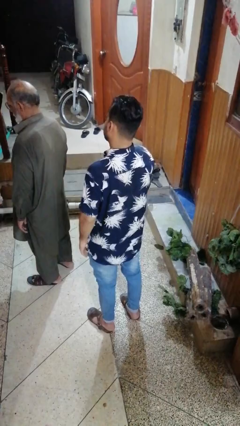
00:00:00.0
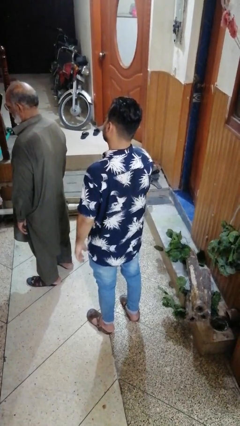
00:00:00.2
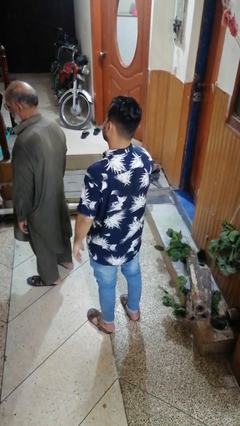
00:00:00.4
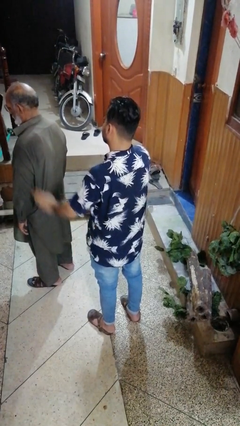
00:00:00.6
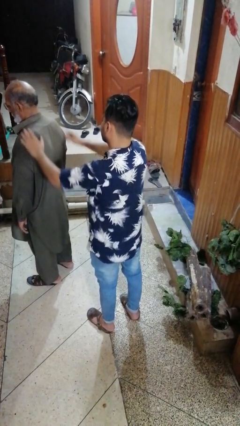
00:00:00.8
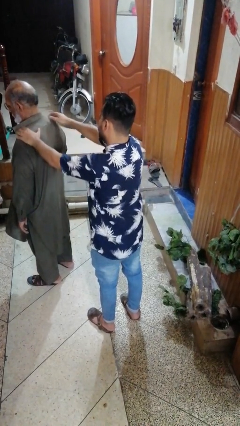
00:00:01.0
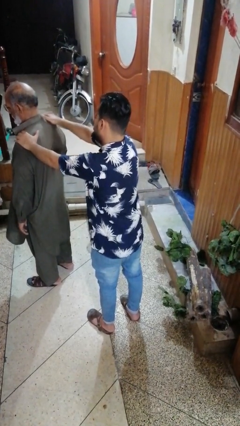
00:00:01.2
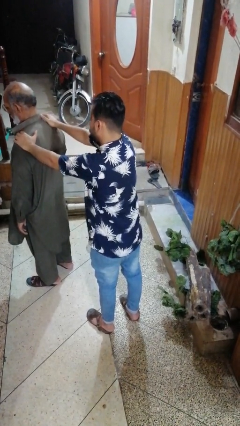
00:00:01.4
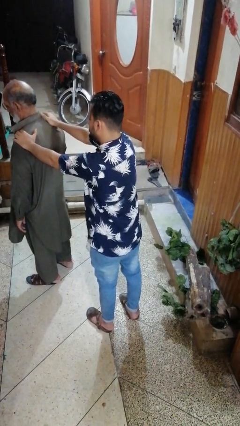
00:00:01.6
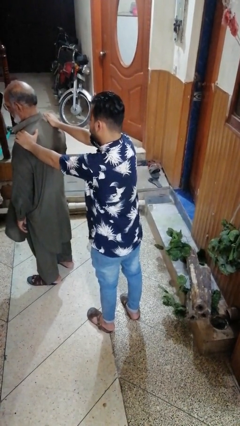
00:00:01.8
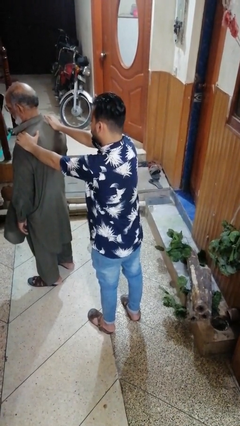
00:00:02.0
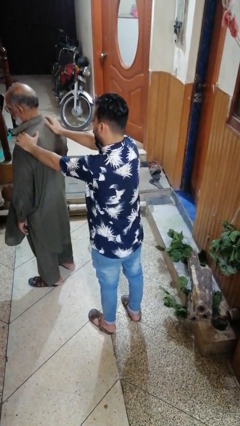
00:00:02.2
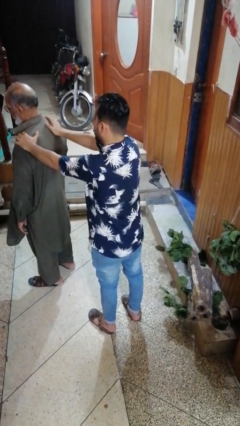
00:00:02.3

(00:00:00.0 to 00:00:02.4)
person grabs person by shoulder

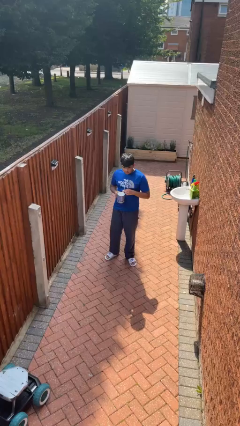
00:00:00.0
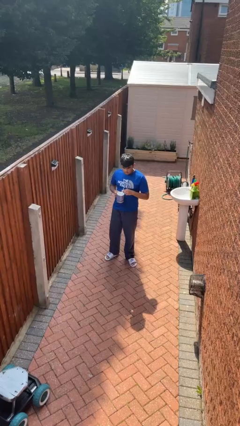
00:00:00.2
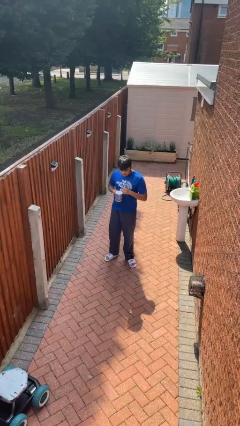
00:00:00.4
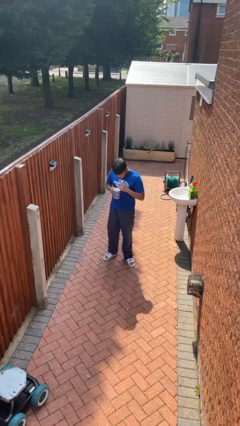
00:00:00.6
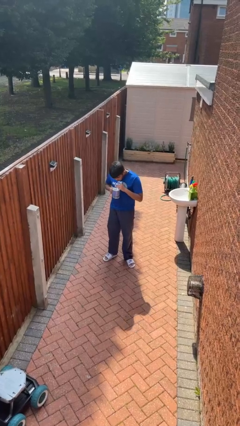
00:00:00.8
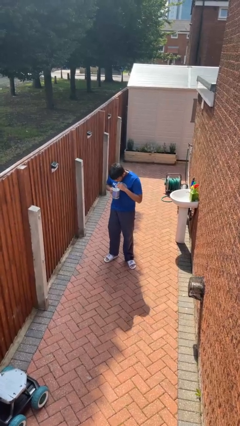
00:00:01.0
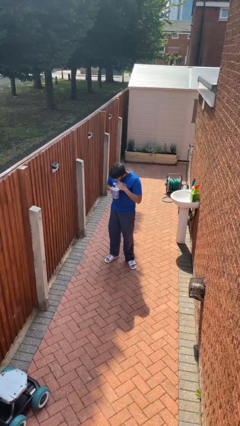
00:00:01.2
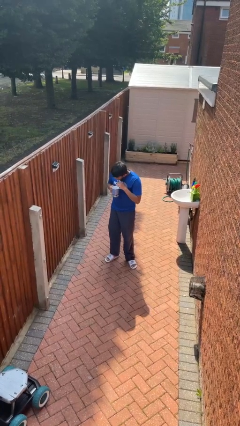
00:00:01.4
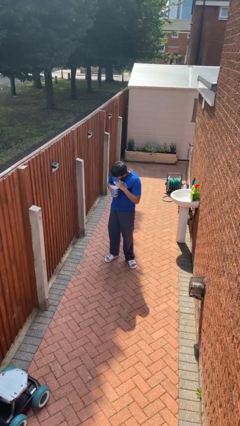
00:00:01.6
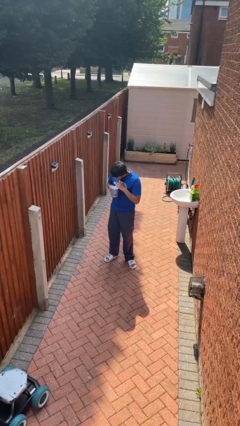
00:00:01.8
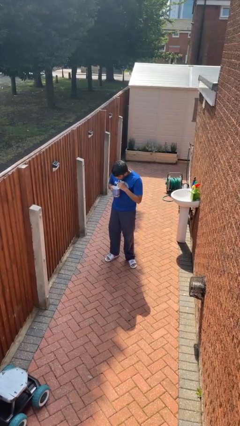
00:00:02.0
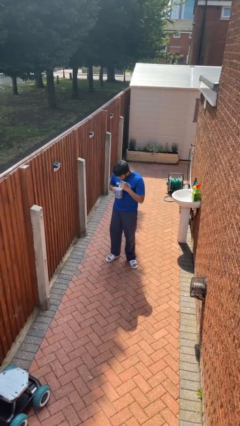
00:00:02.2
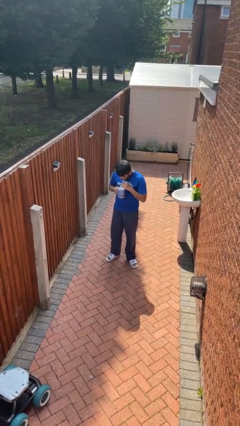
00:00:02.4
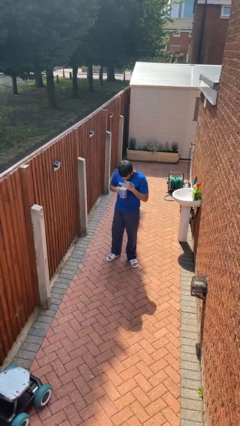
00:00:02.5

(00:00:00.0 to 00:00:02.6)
person drinks from straw

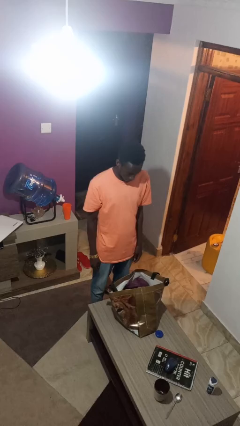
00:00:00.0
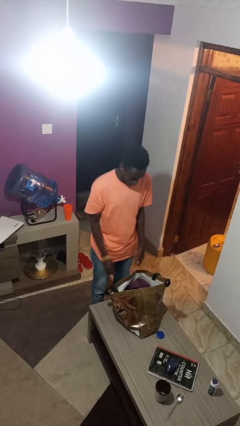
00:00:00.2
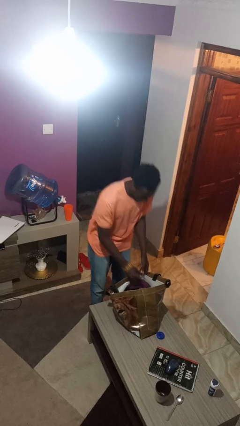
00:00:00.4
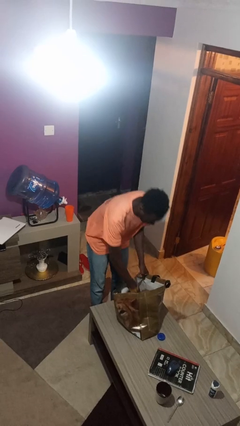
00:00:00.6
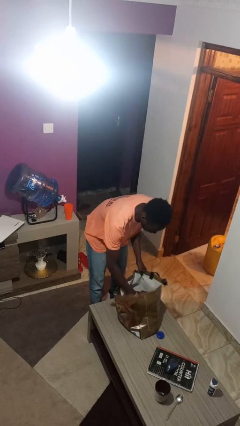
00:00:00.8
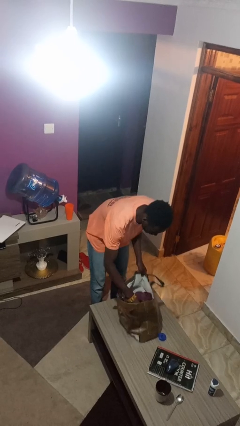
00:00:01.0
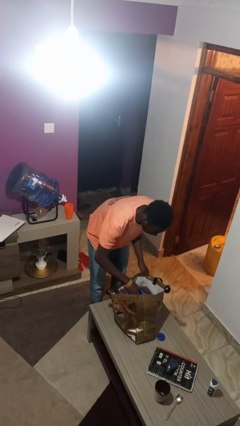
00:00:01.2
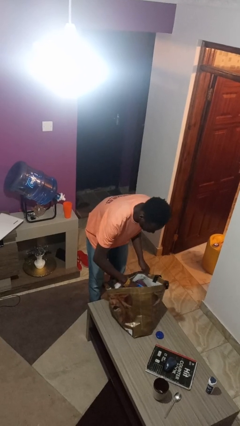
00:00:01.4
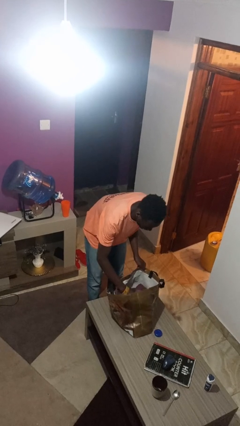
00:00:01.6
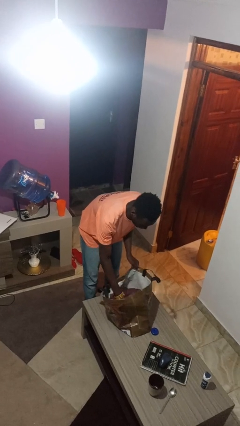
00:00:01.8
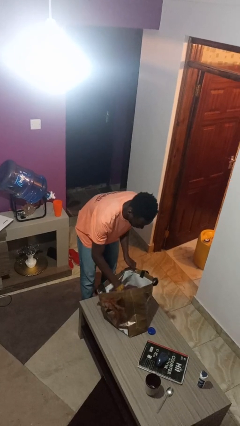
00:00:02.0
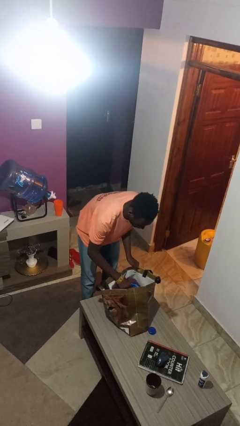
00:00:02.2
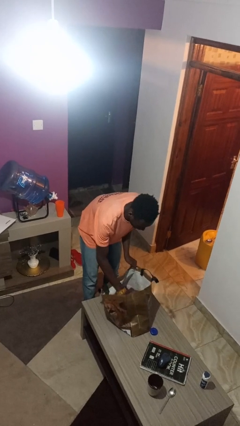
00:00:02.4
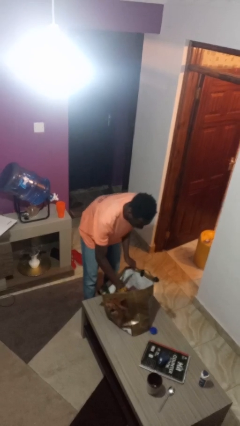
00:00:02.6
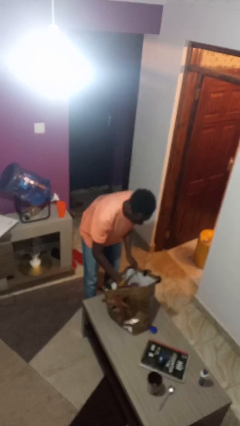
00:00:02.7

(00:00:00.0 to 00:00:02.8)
person searches in bag

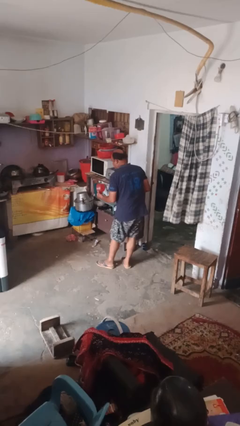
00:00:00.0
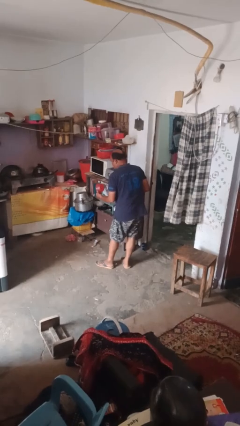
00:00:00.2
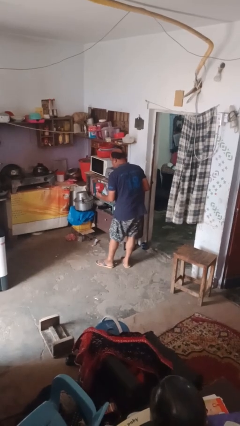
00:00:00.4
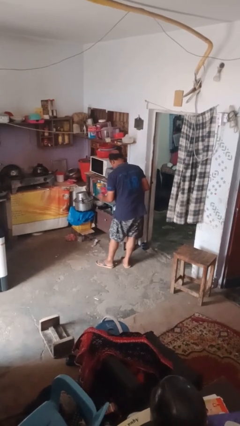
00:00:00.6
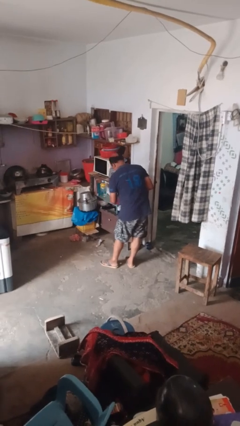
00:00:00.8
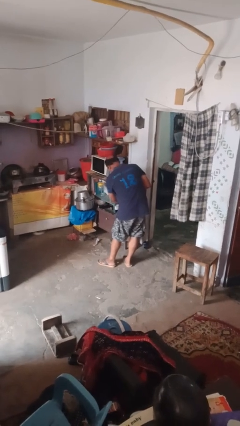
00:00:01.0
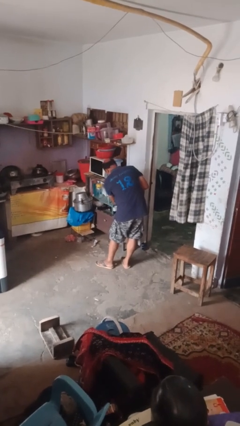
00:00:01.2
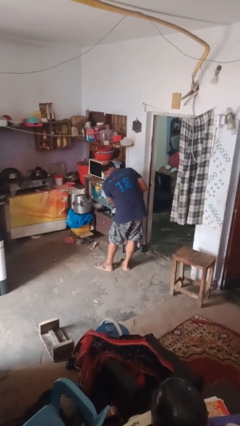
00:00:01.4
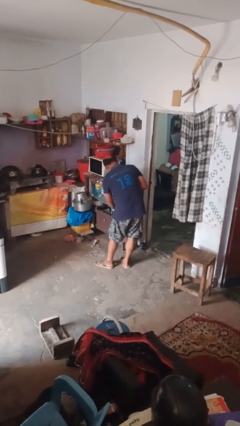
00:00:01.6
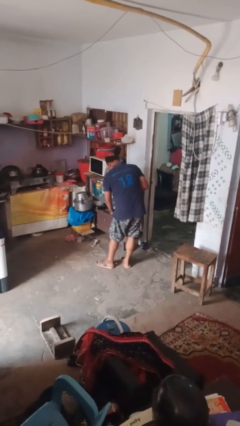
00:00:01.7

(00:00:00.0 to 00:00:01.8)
person puts object into kitchen drawer

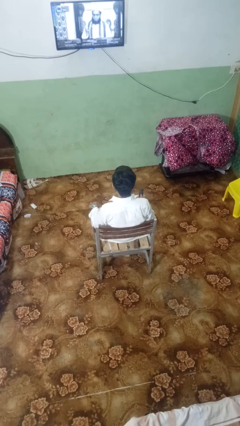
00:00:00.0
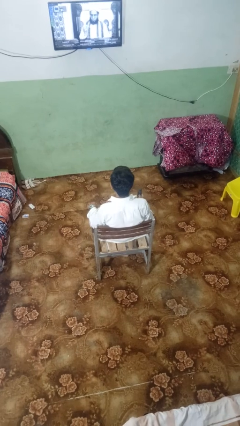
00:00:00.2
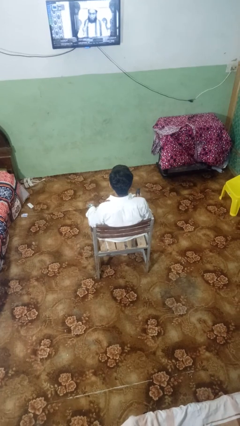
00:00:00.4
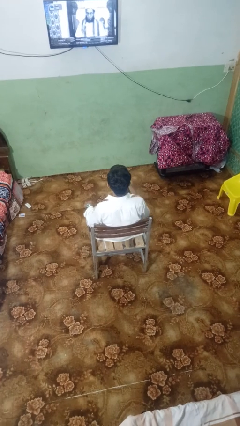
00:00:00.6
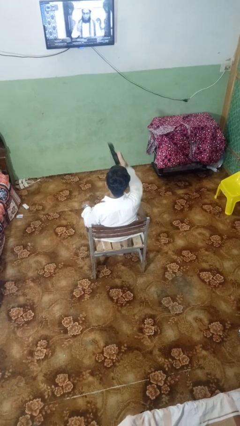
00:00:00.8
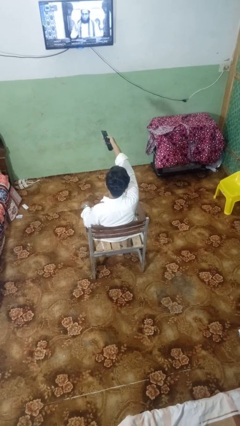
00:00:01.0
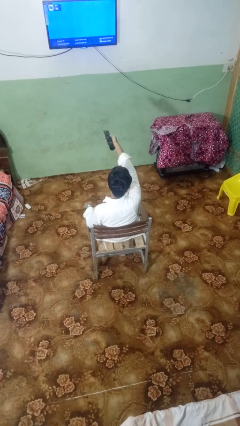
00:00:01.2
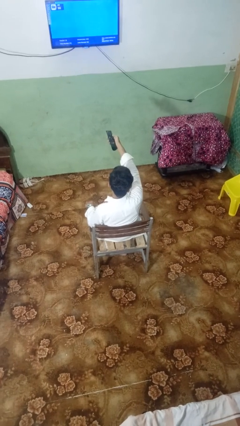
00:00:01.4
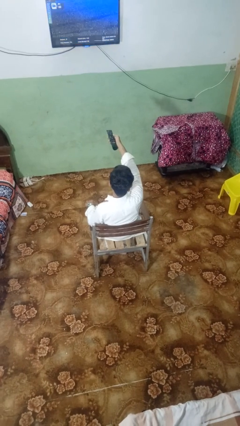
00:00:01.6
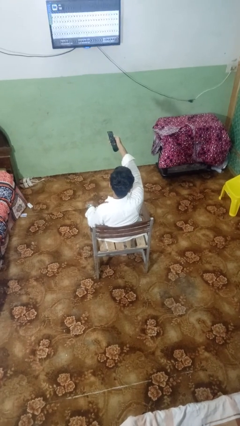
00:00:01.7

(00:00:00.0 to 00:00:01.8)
person uses television remote

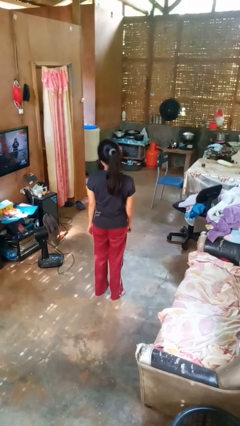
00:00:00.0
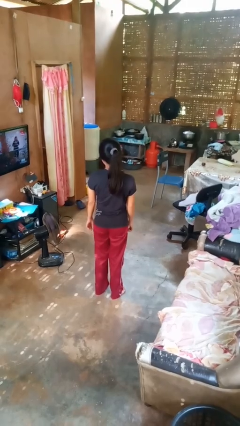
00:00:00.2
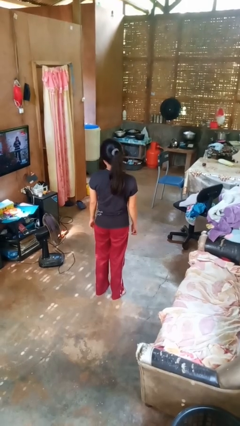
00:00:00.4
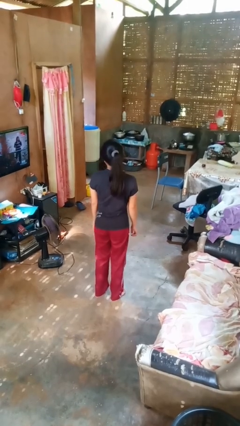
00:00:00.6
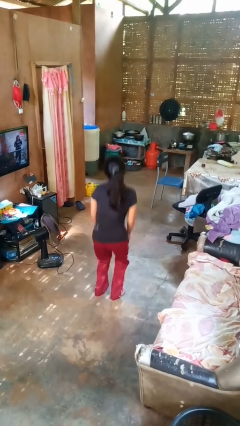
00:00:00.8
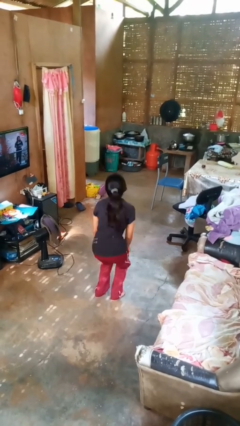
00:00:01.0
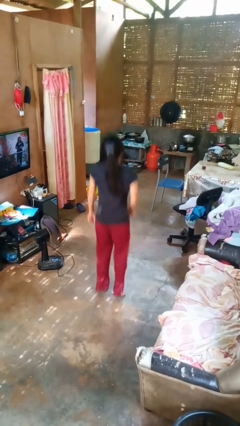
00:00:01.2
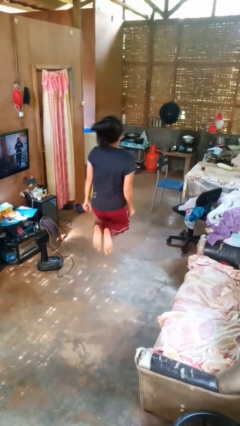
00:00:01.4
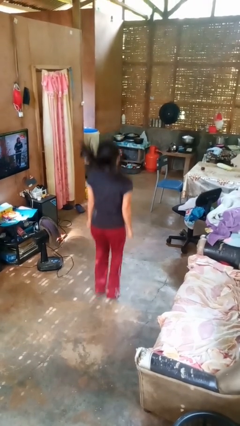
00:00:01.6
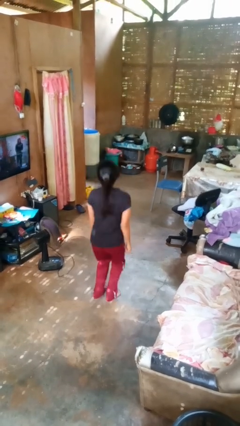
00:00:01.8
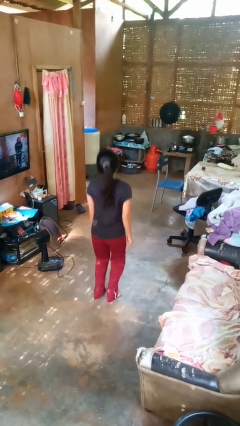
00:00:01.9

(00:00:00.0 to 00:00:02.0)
person jumps

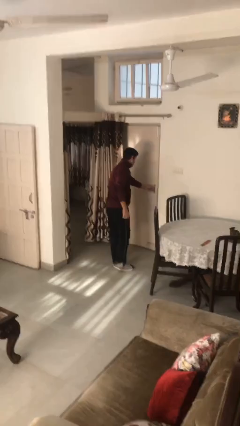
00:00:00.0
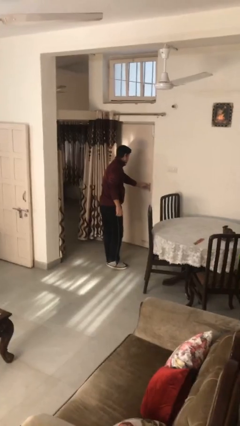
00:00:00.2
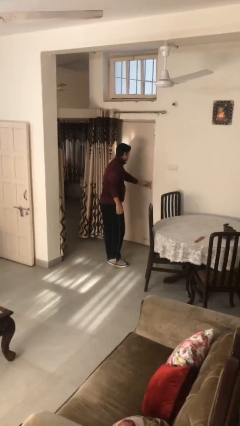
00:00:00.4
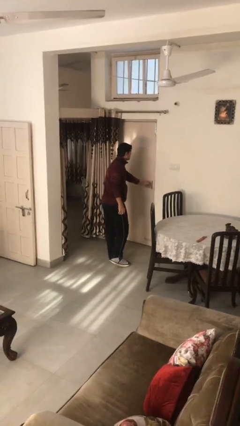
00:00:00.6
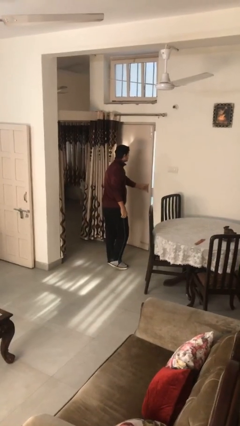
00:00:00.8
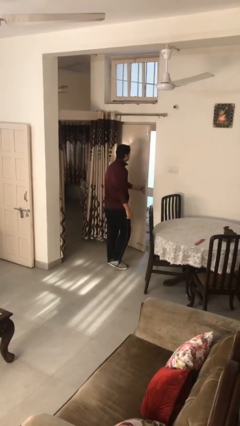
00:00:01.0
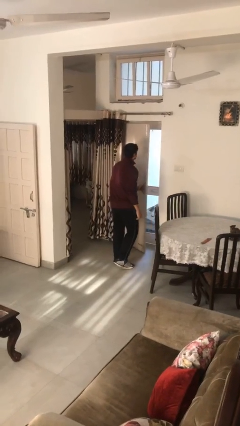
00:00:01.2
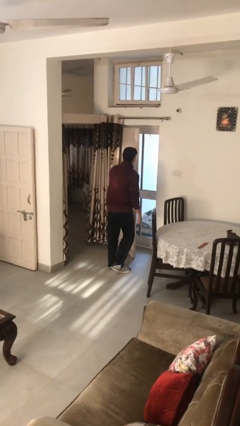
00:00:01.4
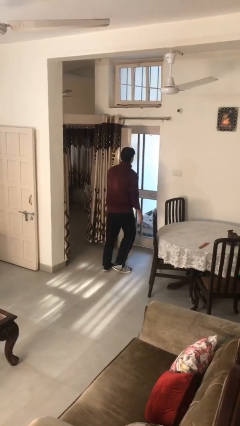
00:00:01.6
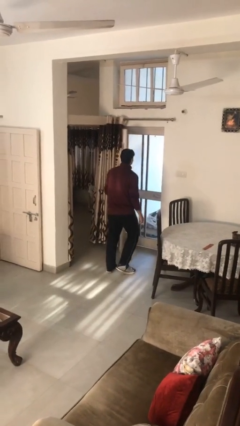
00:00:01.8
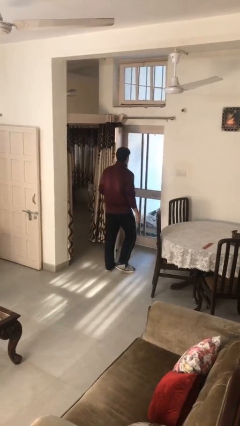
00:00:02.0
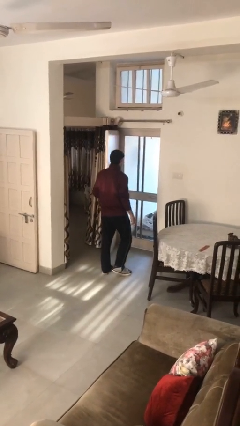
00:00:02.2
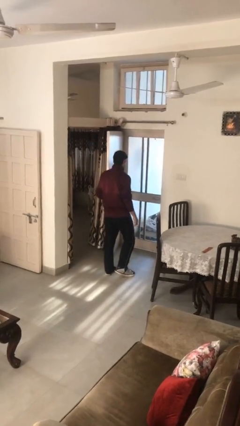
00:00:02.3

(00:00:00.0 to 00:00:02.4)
person opens facility door

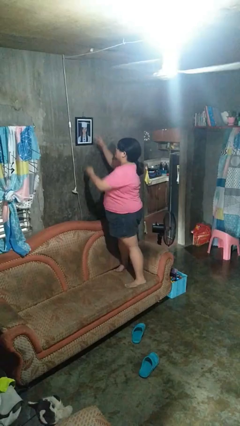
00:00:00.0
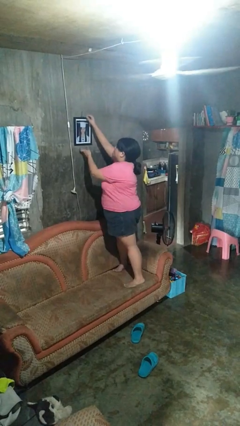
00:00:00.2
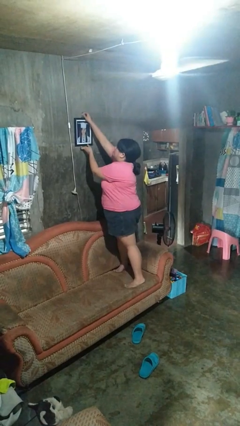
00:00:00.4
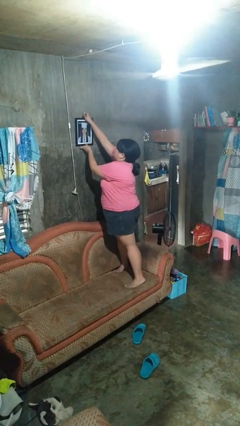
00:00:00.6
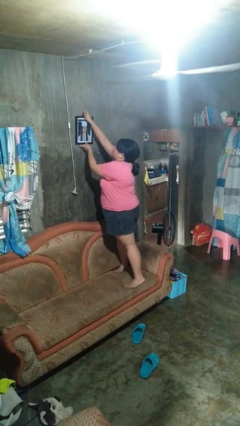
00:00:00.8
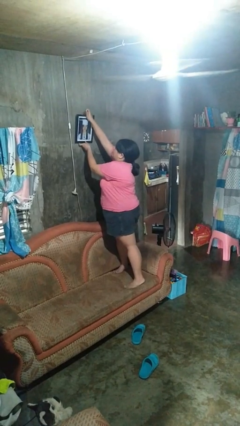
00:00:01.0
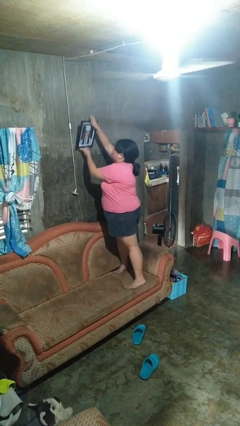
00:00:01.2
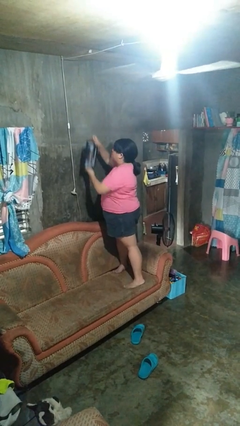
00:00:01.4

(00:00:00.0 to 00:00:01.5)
person takes down picture frame
